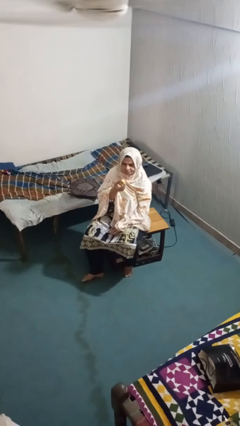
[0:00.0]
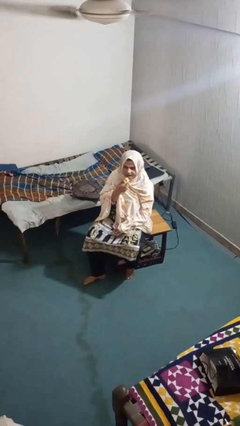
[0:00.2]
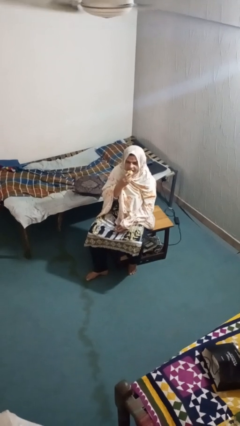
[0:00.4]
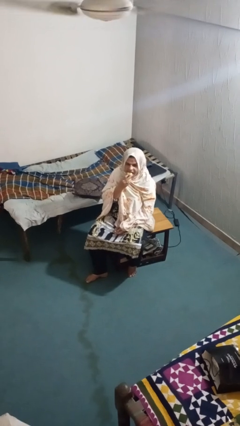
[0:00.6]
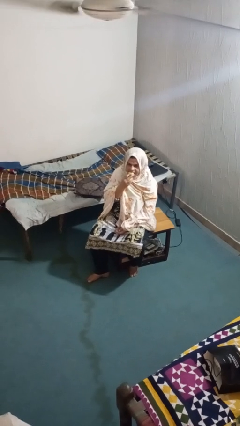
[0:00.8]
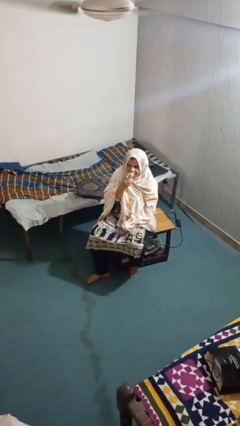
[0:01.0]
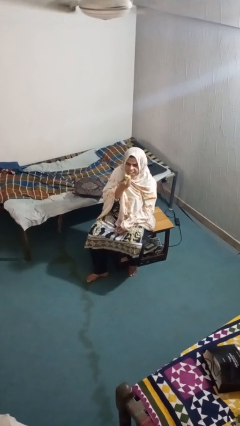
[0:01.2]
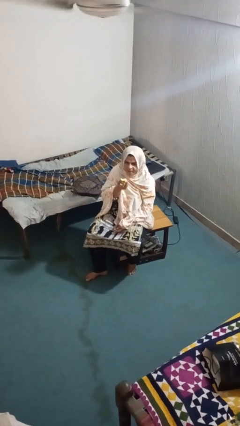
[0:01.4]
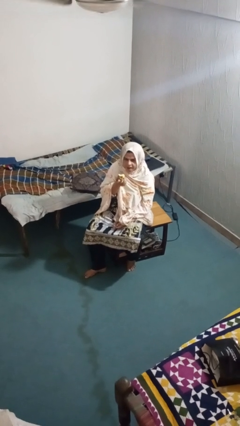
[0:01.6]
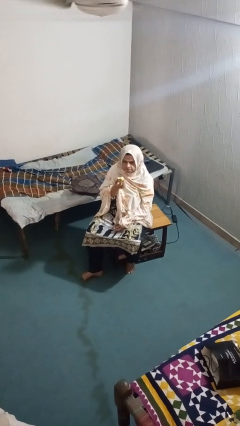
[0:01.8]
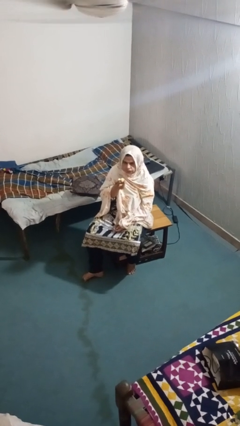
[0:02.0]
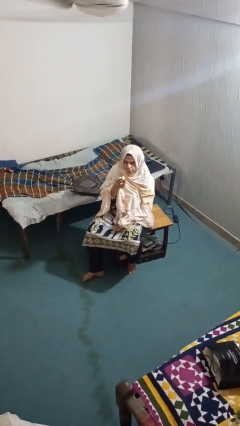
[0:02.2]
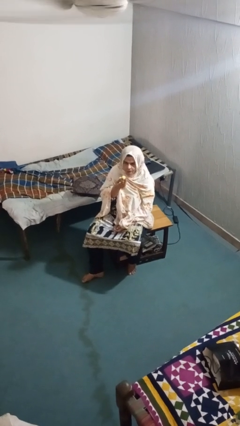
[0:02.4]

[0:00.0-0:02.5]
person eats apple

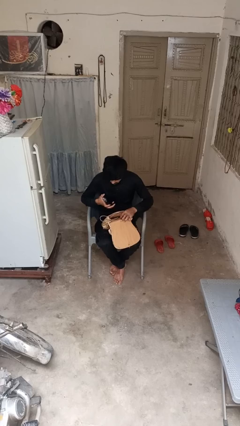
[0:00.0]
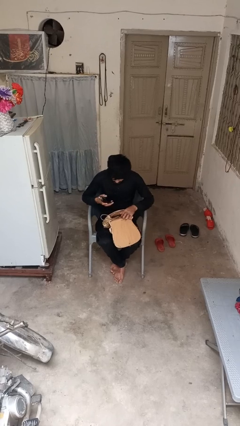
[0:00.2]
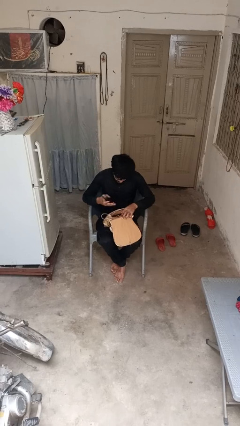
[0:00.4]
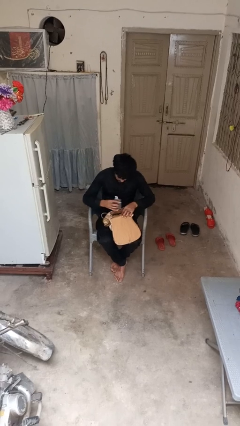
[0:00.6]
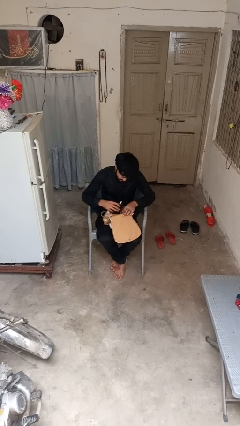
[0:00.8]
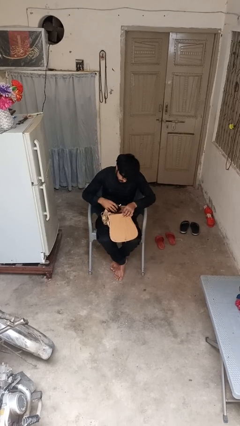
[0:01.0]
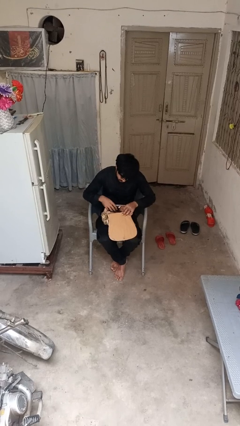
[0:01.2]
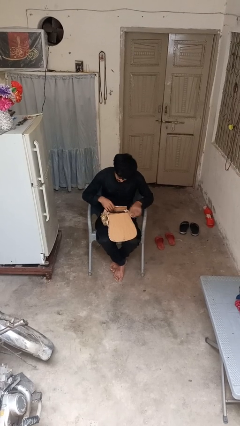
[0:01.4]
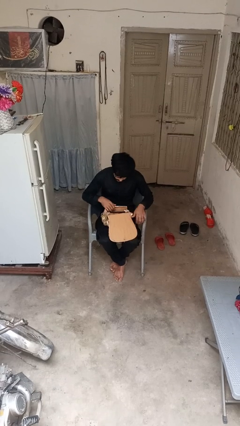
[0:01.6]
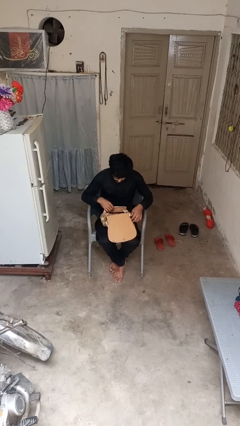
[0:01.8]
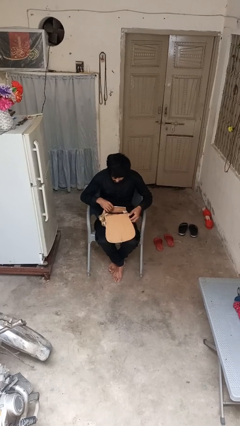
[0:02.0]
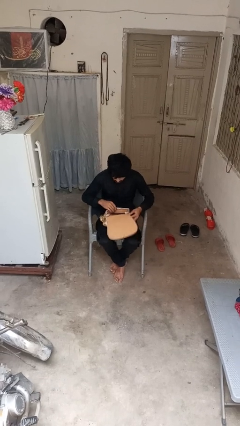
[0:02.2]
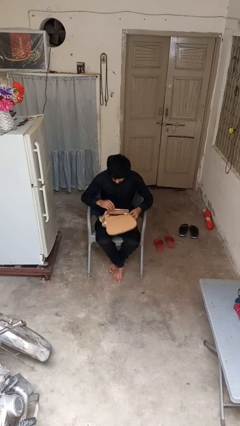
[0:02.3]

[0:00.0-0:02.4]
person puts object into purse

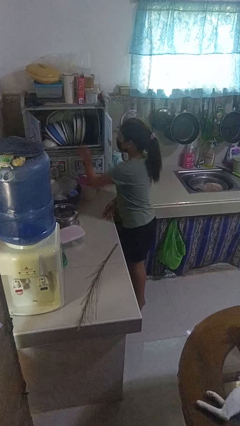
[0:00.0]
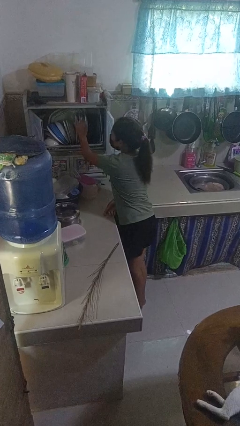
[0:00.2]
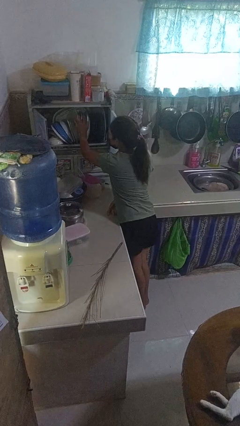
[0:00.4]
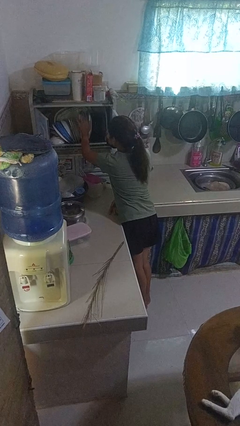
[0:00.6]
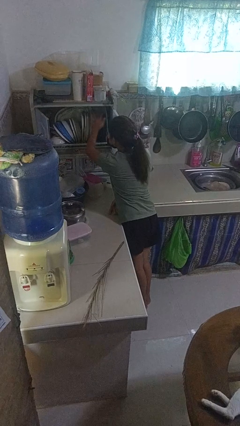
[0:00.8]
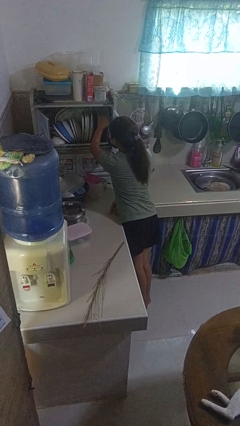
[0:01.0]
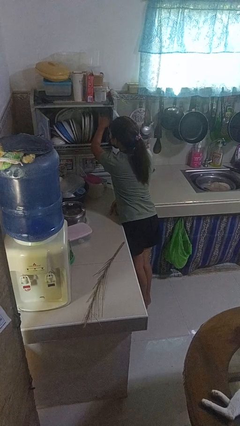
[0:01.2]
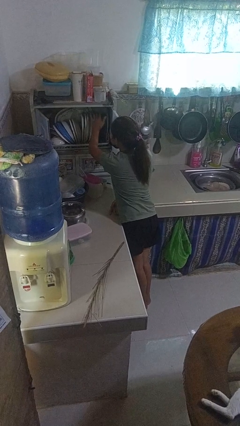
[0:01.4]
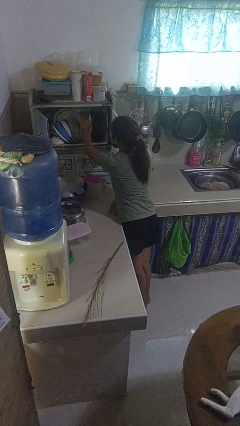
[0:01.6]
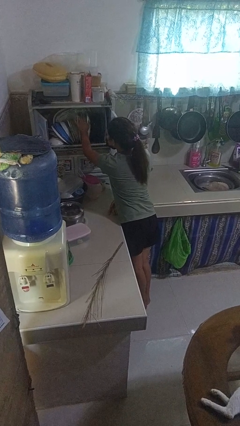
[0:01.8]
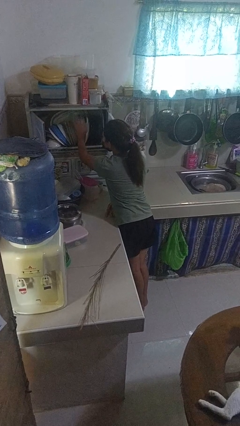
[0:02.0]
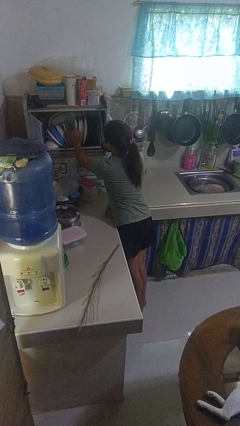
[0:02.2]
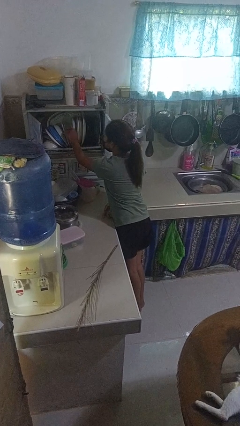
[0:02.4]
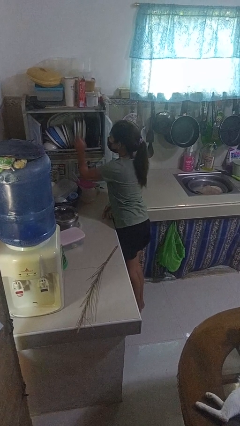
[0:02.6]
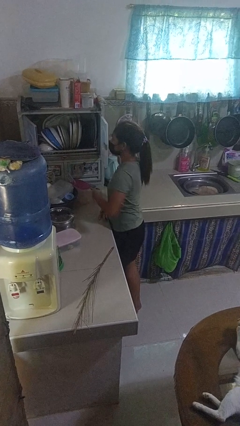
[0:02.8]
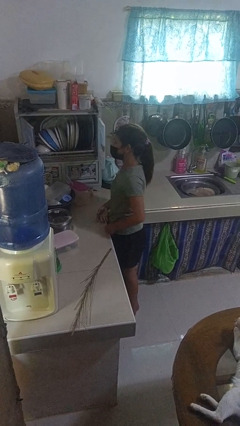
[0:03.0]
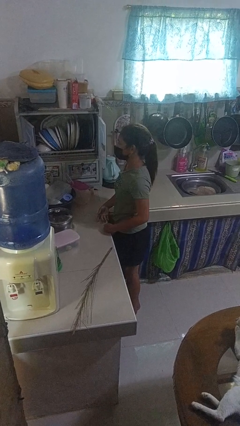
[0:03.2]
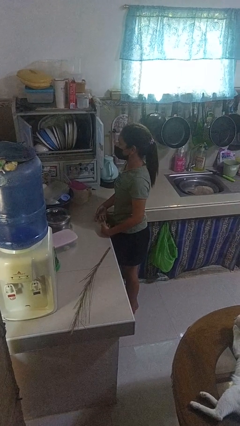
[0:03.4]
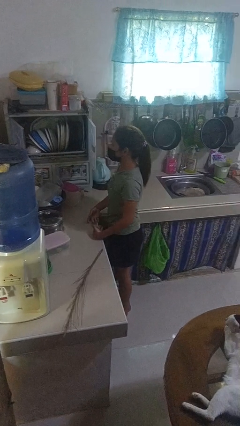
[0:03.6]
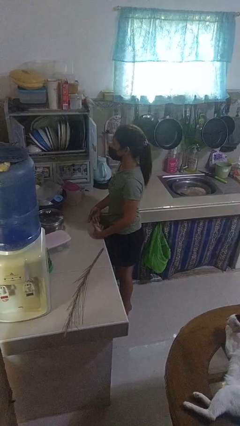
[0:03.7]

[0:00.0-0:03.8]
person searches in kitchen drawer

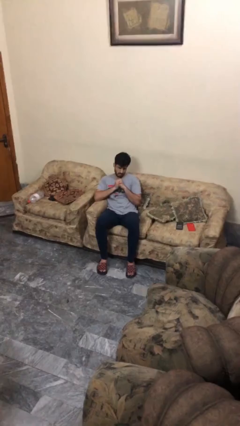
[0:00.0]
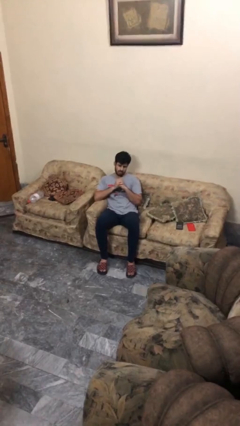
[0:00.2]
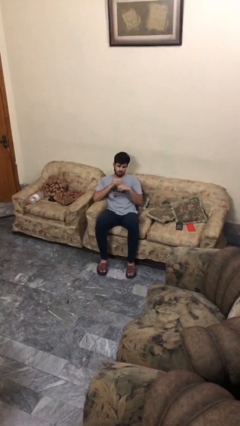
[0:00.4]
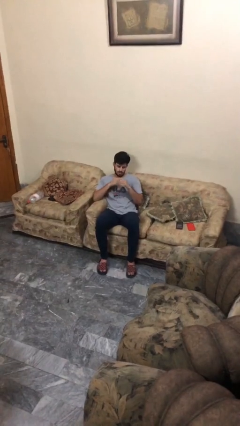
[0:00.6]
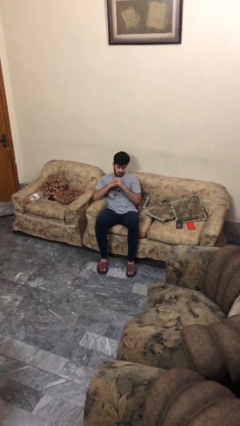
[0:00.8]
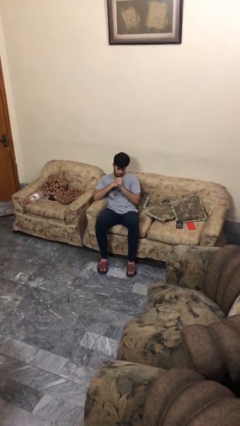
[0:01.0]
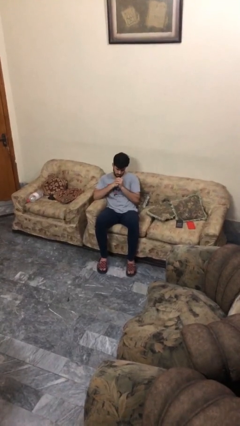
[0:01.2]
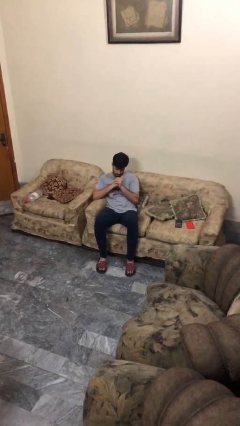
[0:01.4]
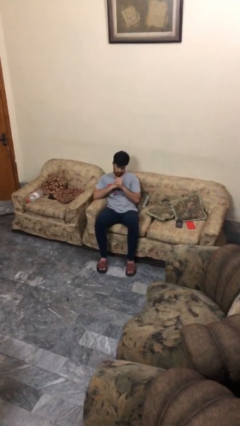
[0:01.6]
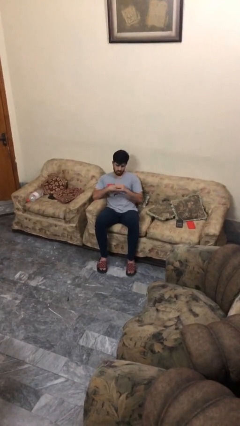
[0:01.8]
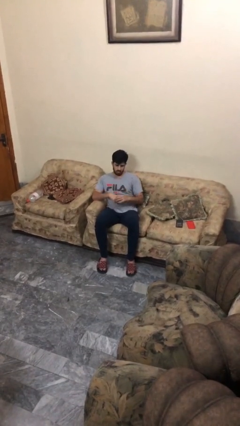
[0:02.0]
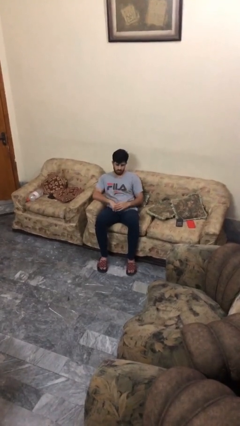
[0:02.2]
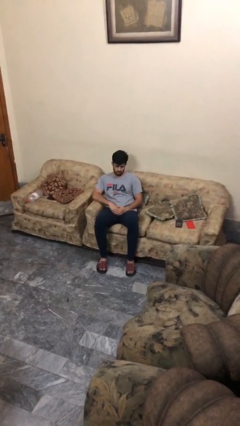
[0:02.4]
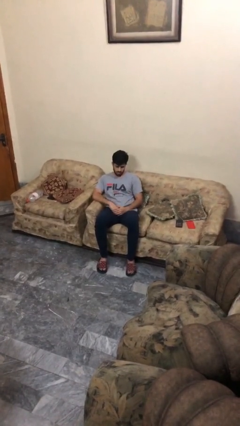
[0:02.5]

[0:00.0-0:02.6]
person cracks knuckles

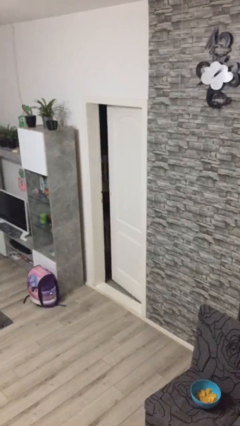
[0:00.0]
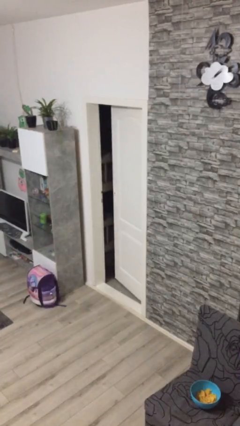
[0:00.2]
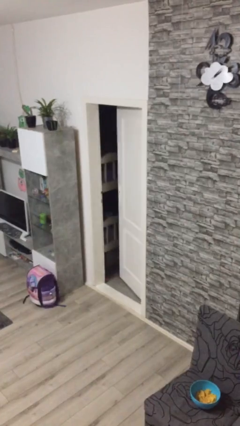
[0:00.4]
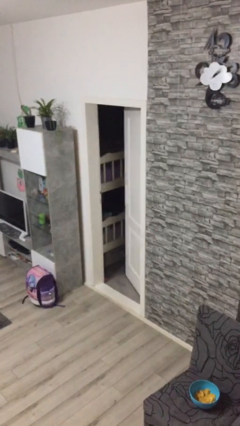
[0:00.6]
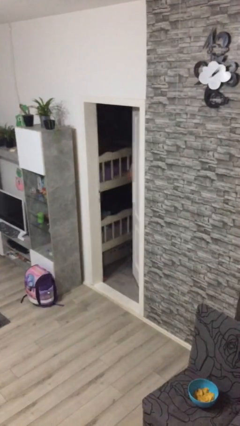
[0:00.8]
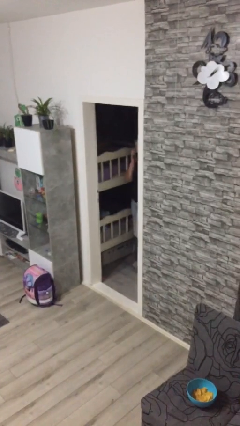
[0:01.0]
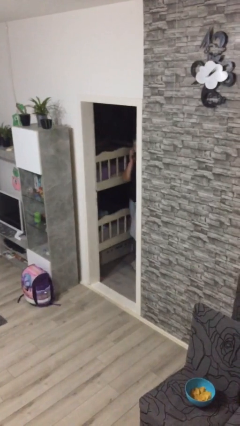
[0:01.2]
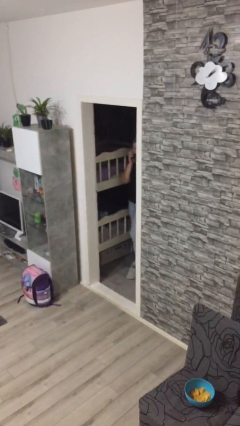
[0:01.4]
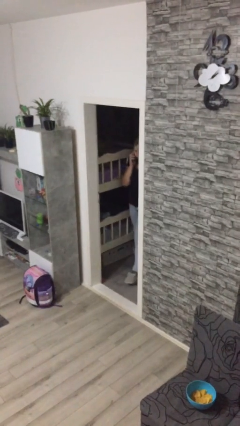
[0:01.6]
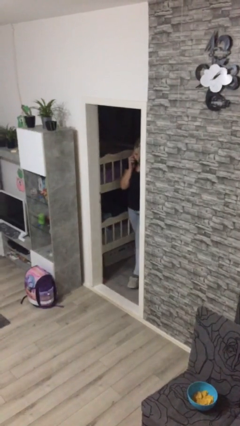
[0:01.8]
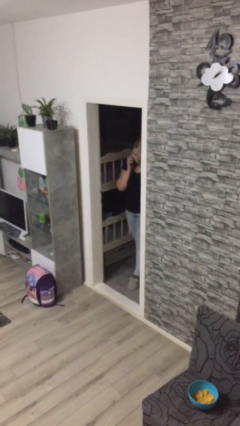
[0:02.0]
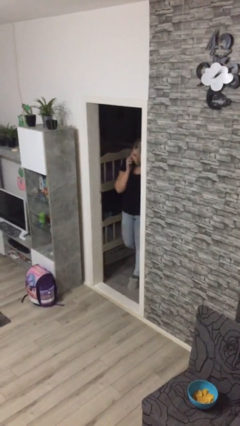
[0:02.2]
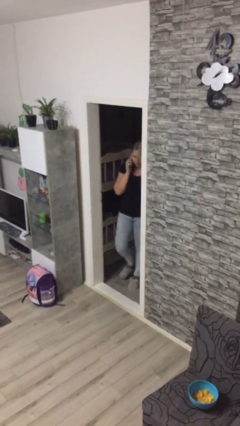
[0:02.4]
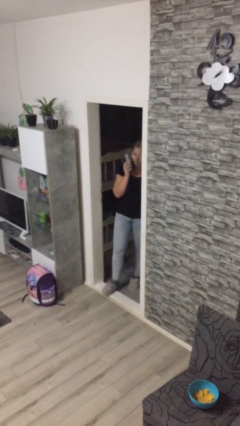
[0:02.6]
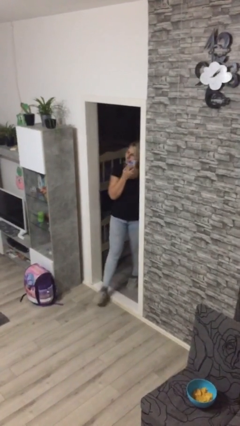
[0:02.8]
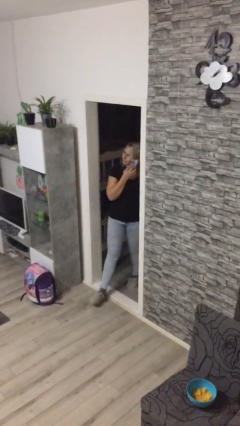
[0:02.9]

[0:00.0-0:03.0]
person opens facility door

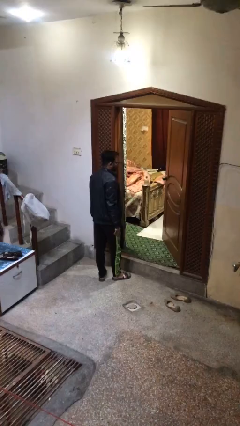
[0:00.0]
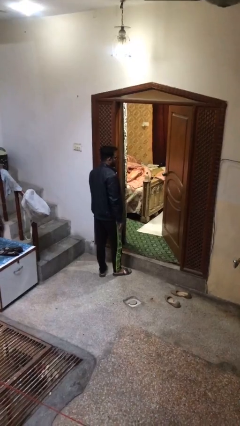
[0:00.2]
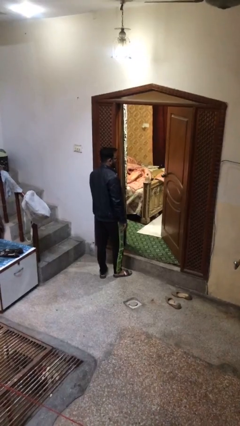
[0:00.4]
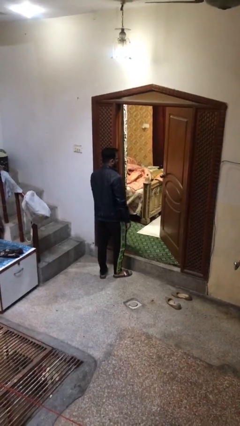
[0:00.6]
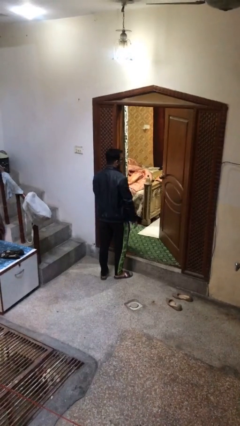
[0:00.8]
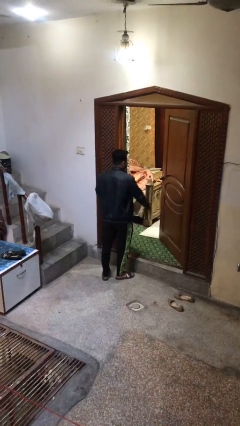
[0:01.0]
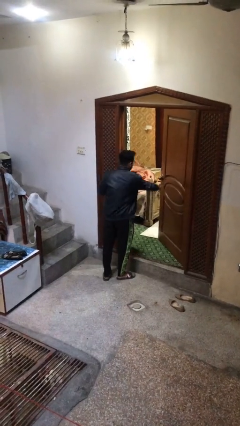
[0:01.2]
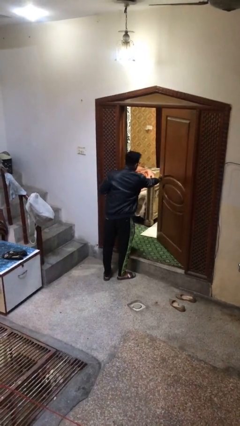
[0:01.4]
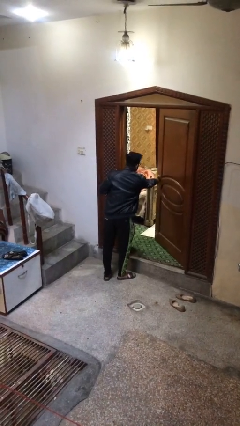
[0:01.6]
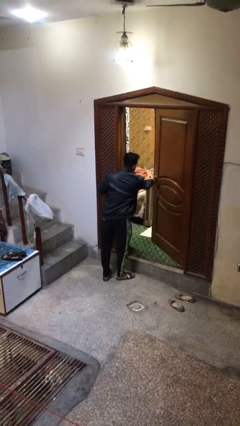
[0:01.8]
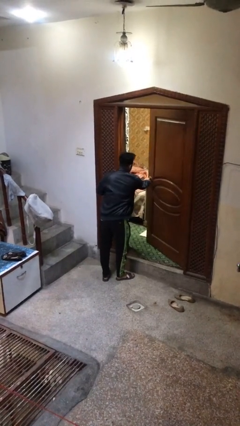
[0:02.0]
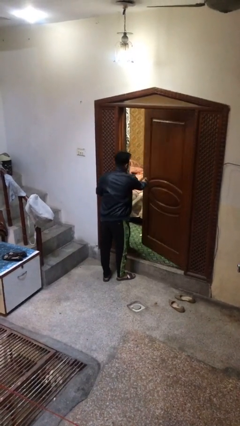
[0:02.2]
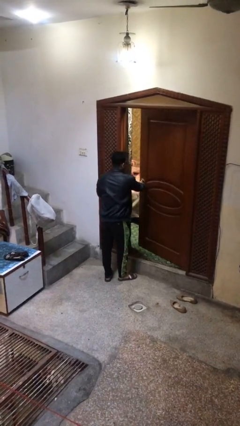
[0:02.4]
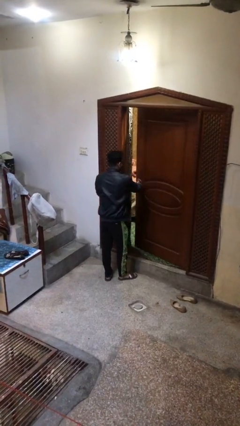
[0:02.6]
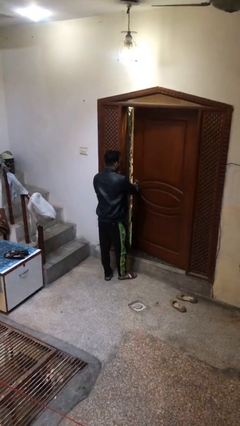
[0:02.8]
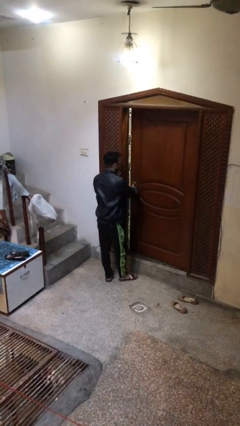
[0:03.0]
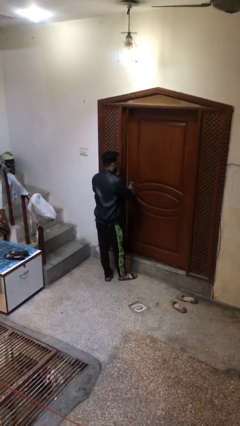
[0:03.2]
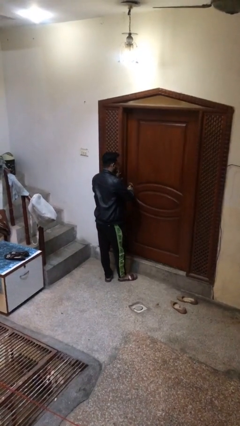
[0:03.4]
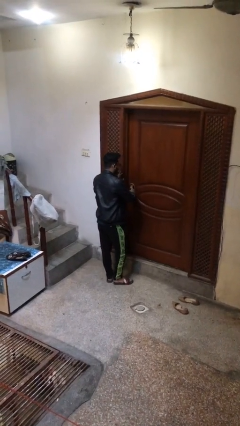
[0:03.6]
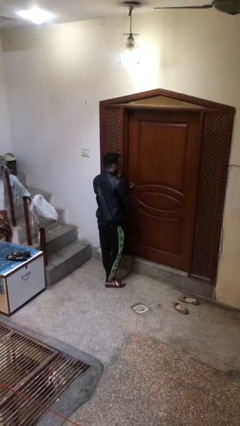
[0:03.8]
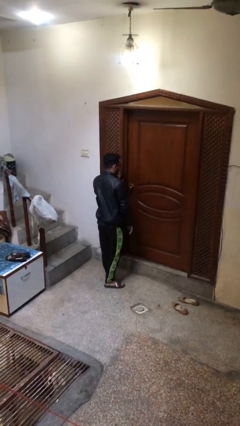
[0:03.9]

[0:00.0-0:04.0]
person closes facility door
